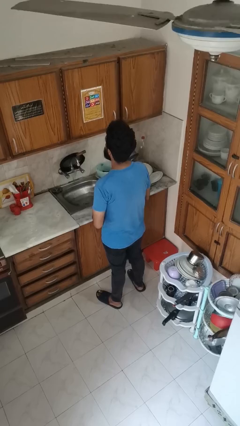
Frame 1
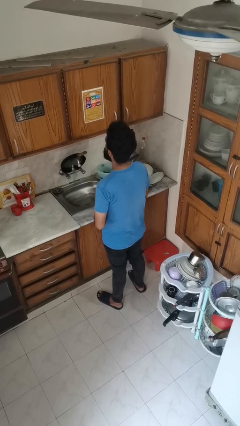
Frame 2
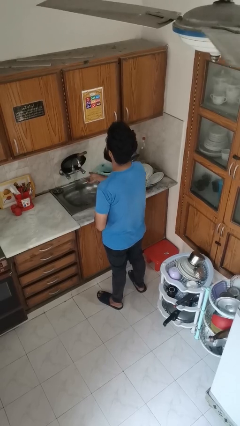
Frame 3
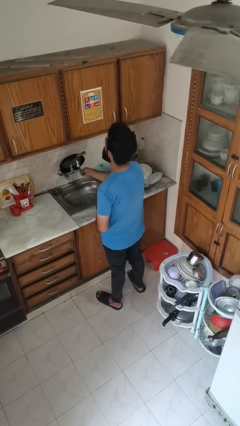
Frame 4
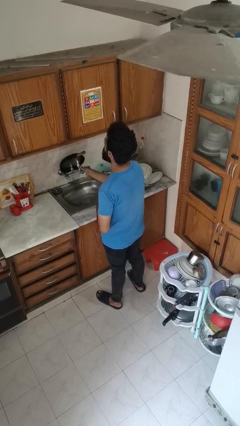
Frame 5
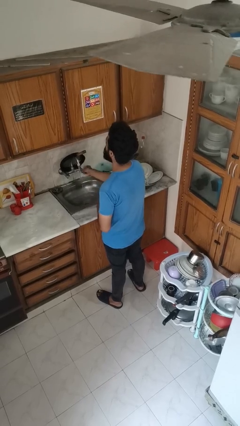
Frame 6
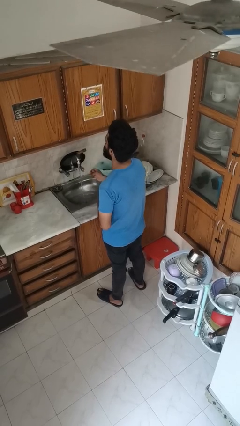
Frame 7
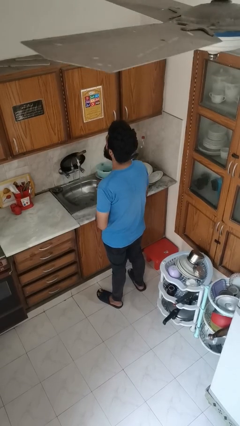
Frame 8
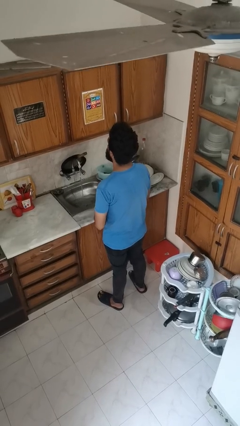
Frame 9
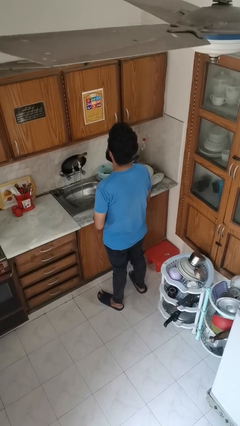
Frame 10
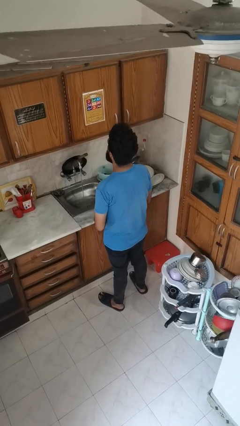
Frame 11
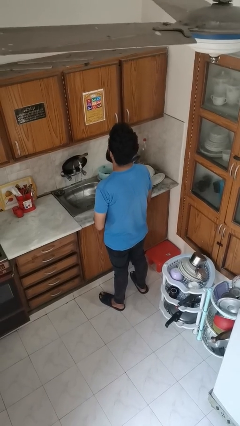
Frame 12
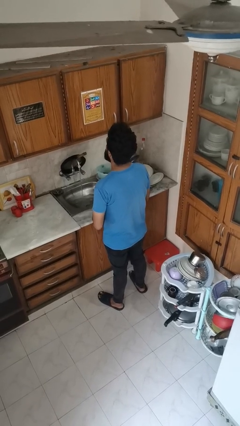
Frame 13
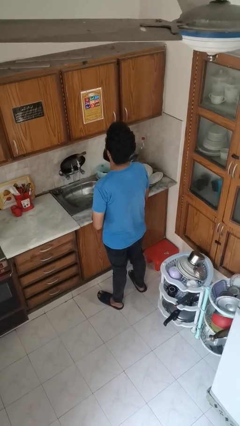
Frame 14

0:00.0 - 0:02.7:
person turns on faucet

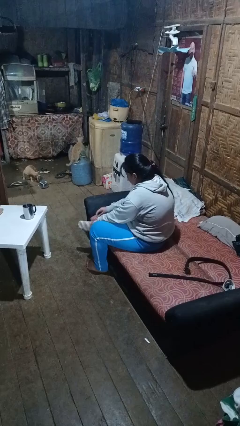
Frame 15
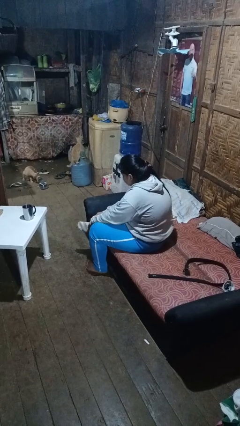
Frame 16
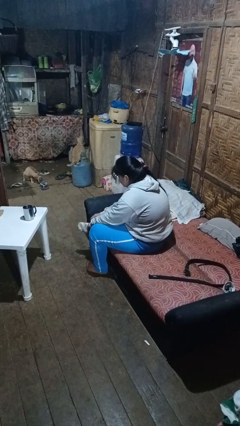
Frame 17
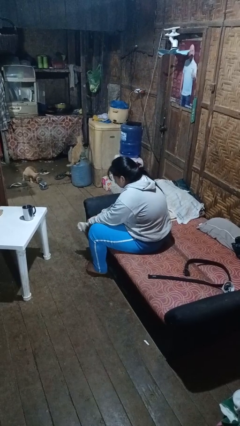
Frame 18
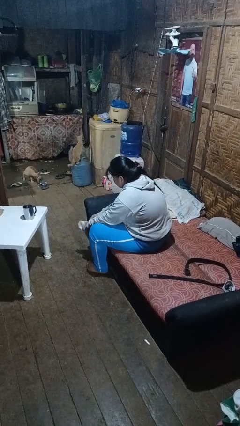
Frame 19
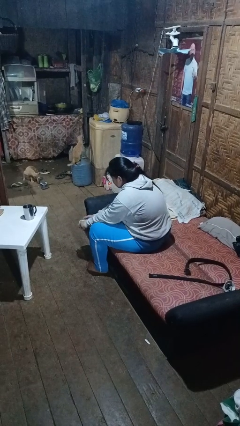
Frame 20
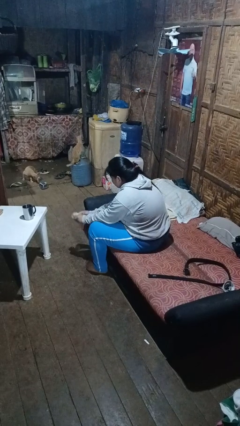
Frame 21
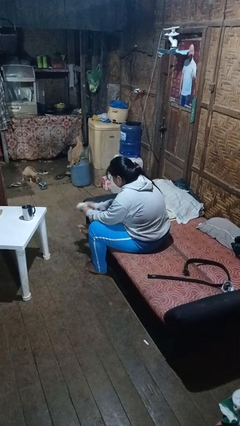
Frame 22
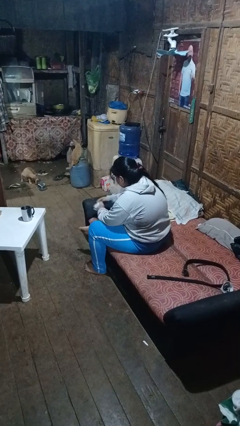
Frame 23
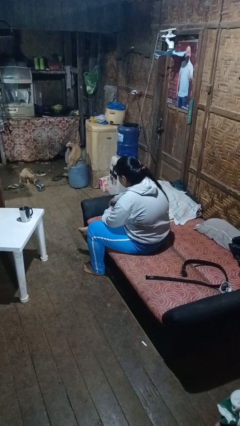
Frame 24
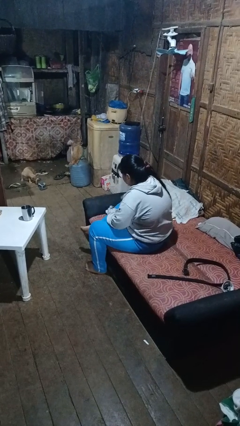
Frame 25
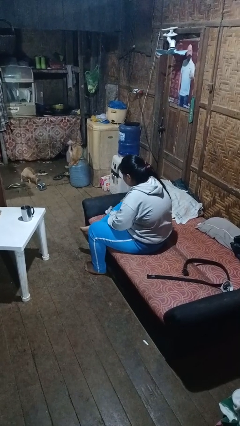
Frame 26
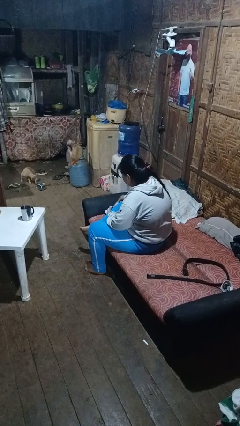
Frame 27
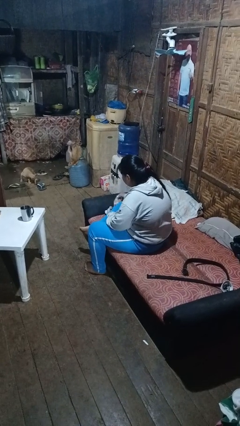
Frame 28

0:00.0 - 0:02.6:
person takes off socks

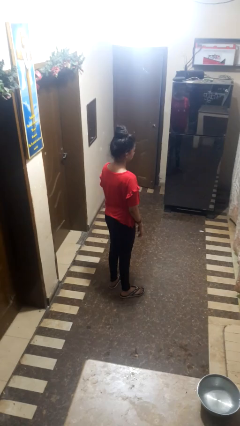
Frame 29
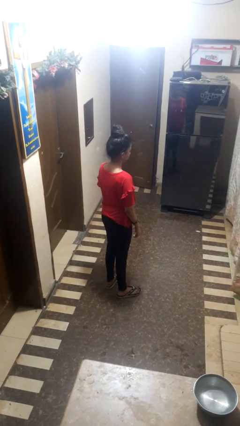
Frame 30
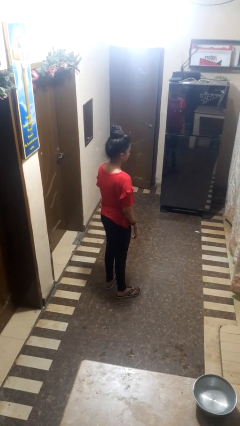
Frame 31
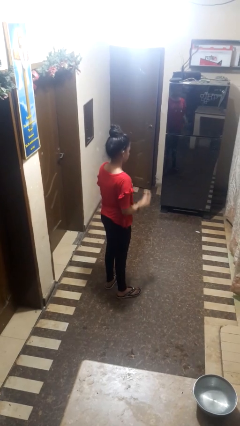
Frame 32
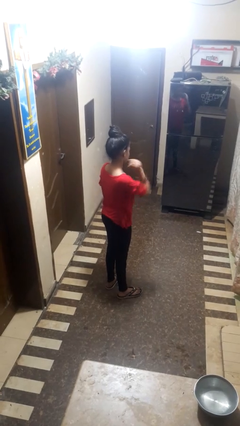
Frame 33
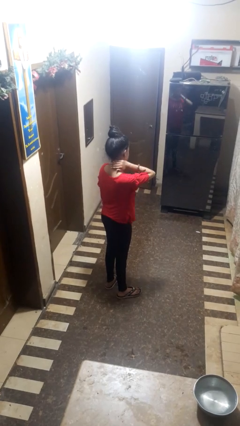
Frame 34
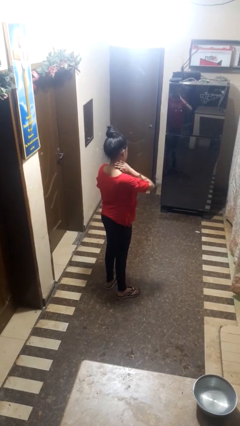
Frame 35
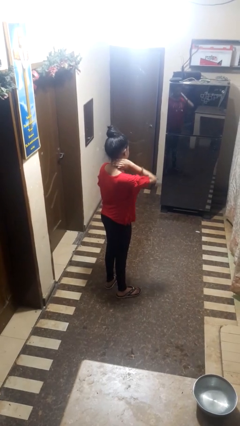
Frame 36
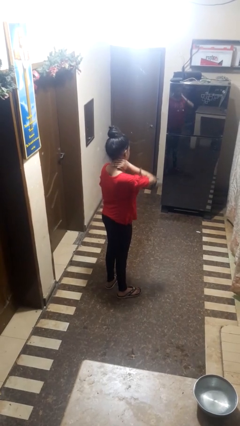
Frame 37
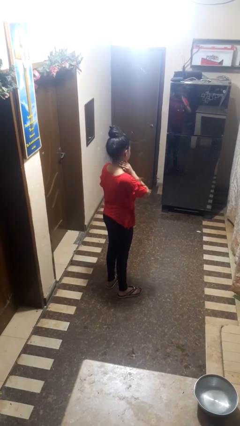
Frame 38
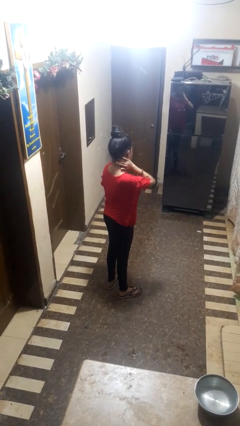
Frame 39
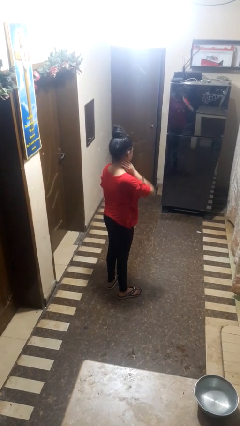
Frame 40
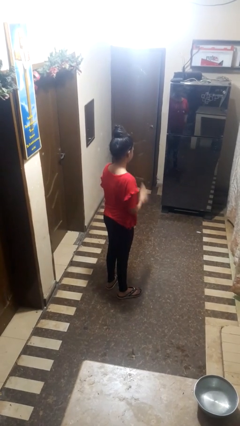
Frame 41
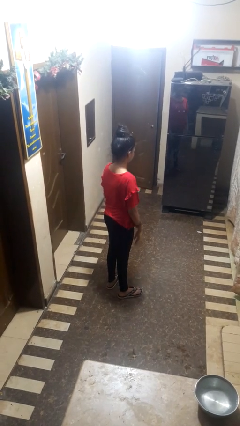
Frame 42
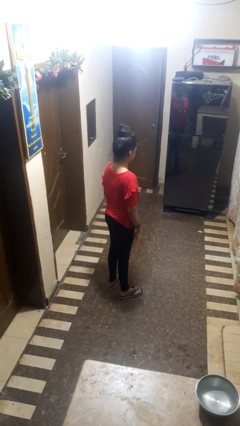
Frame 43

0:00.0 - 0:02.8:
person rubs neck

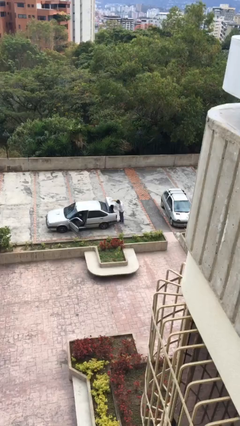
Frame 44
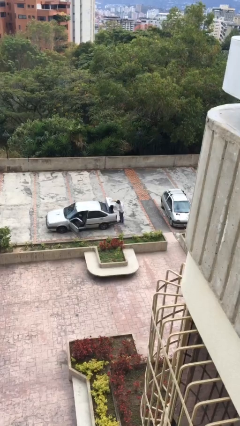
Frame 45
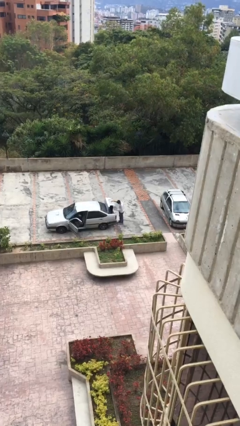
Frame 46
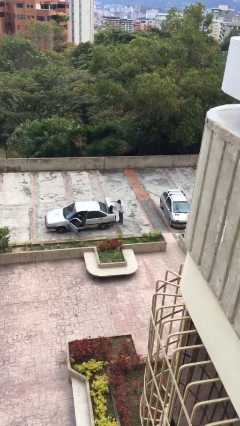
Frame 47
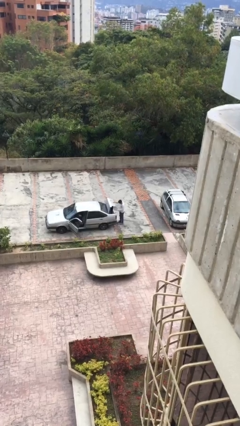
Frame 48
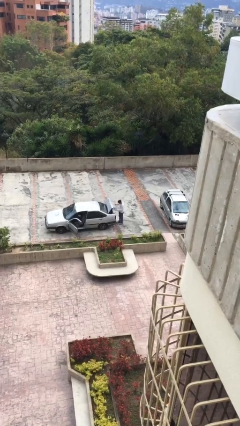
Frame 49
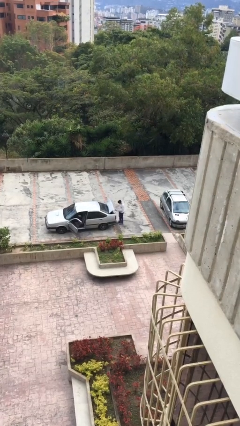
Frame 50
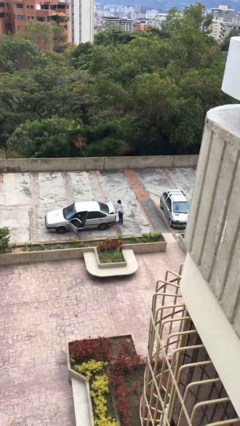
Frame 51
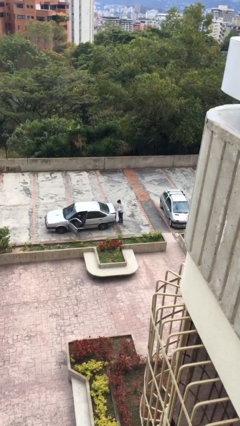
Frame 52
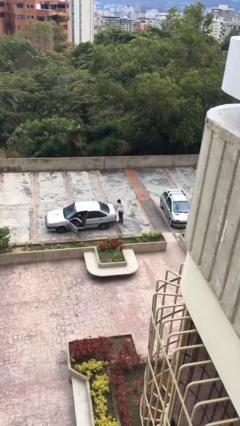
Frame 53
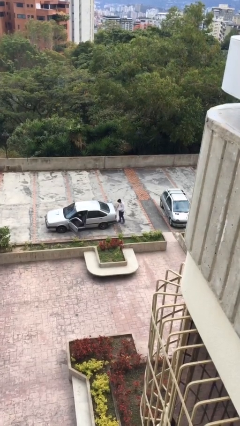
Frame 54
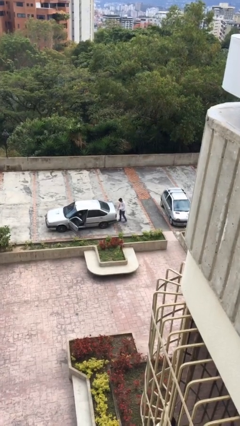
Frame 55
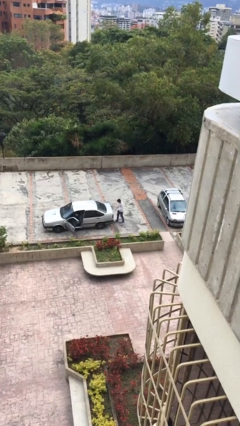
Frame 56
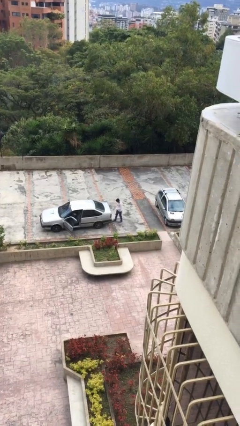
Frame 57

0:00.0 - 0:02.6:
person closes car trunk

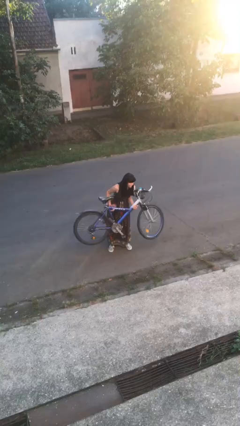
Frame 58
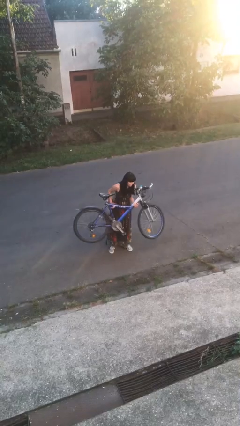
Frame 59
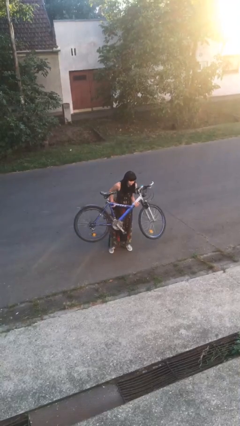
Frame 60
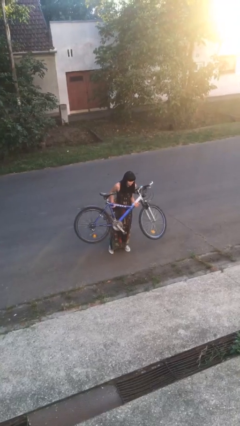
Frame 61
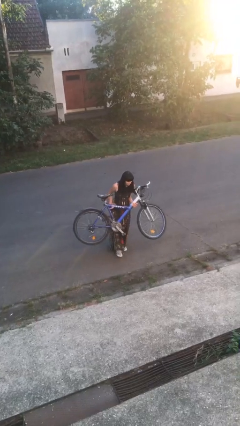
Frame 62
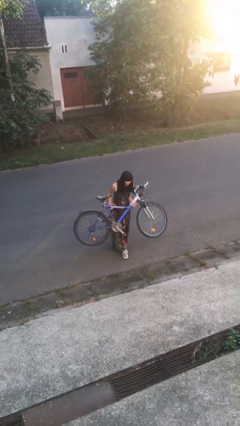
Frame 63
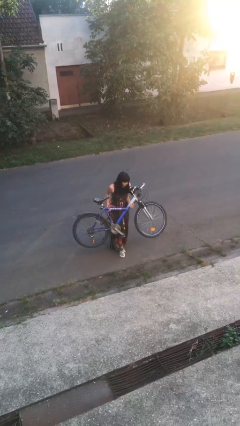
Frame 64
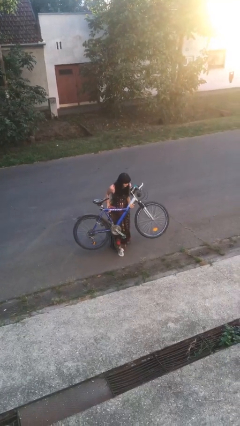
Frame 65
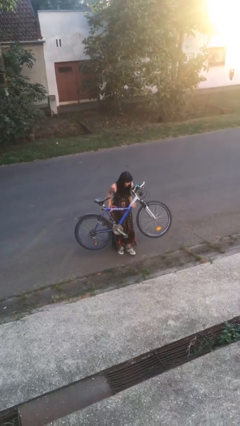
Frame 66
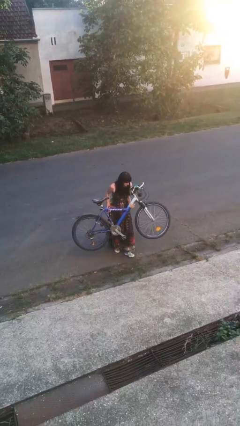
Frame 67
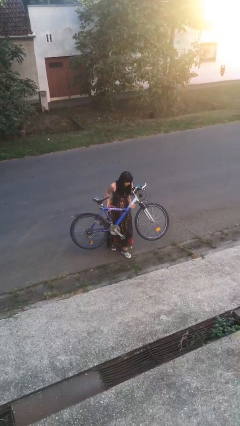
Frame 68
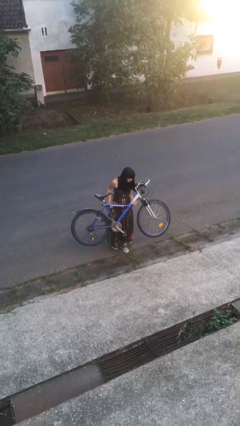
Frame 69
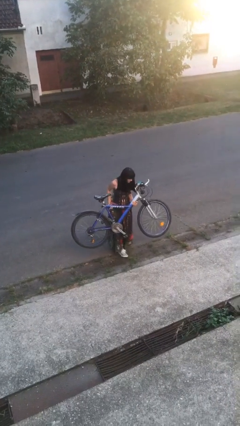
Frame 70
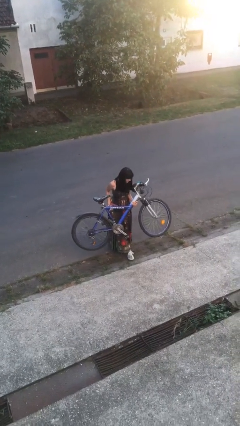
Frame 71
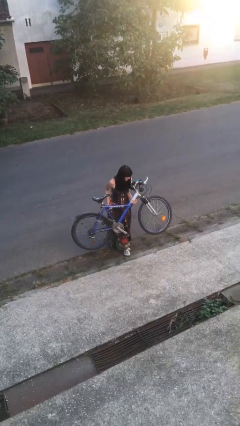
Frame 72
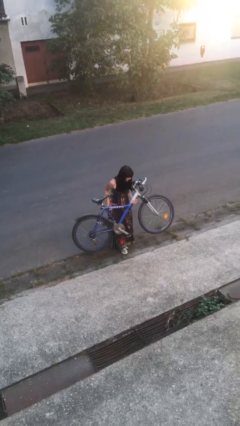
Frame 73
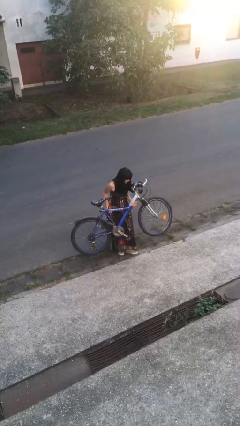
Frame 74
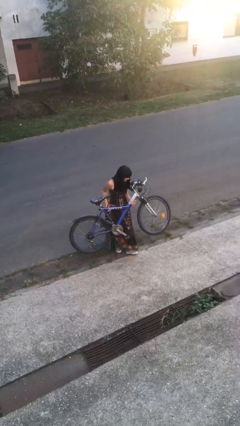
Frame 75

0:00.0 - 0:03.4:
person carries heavy object

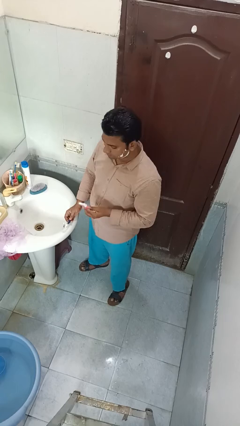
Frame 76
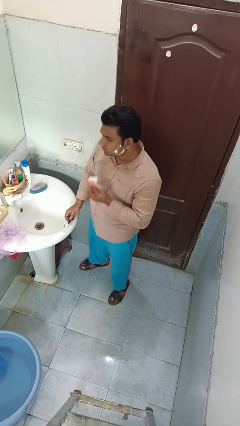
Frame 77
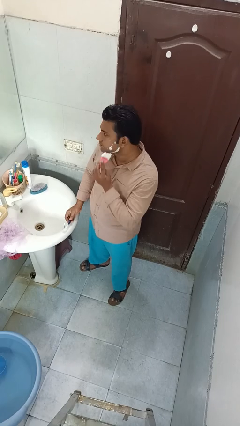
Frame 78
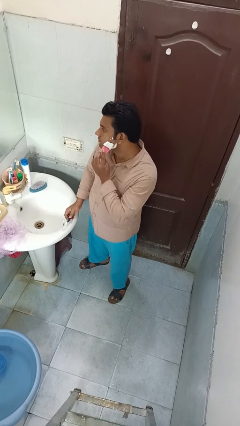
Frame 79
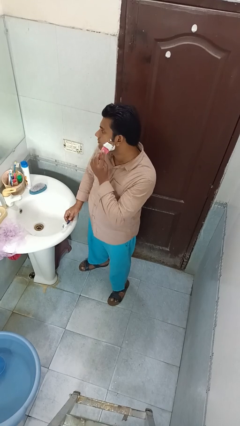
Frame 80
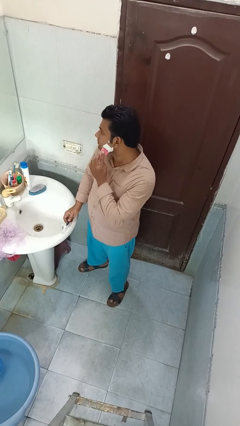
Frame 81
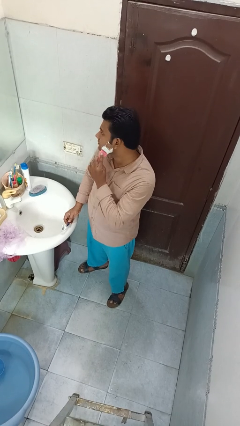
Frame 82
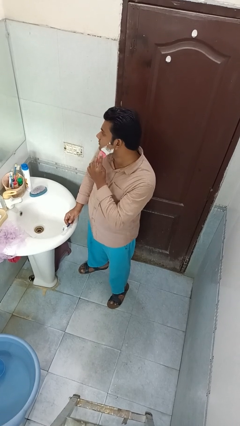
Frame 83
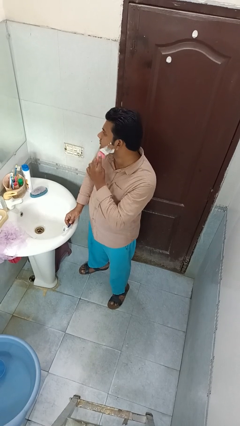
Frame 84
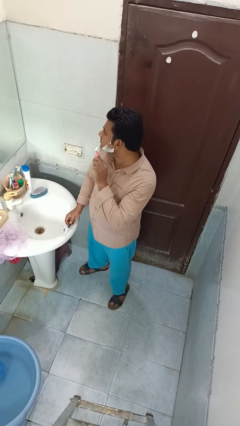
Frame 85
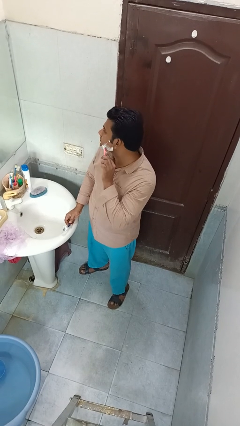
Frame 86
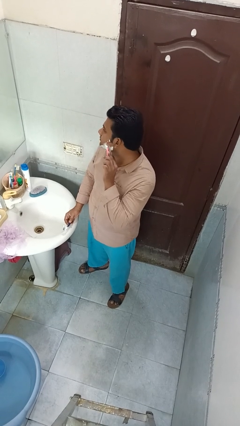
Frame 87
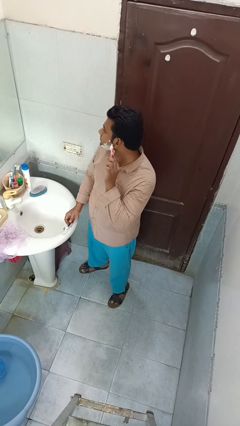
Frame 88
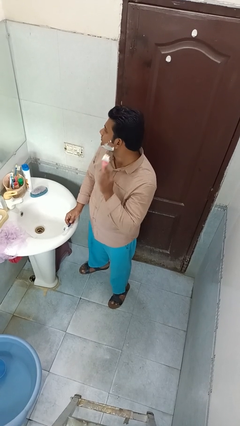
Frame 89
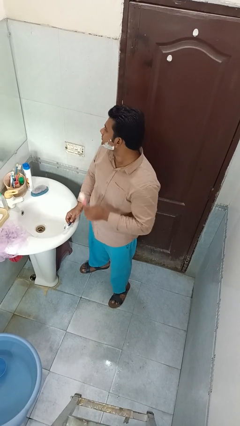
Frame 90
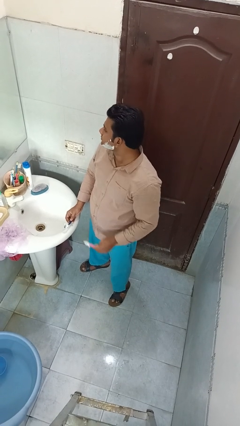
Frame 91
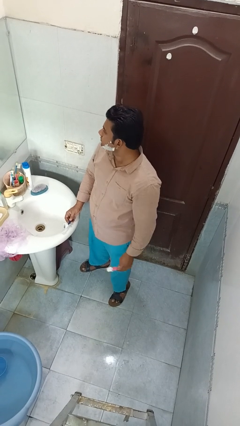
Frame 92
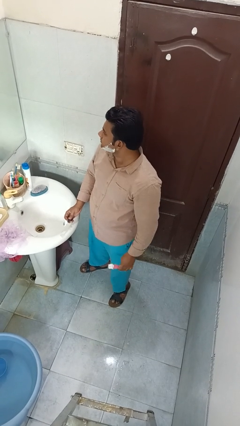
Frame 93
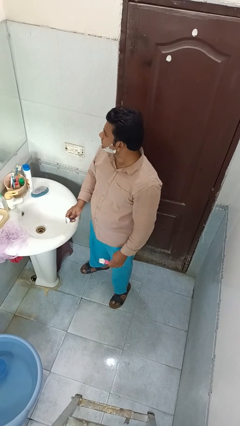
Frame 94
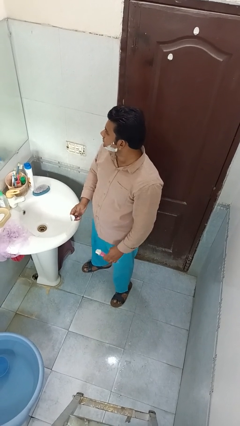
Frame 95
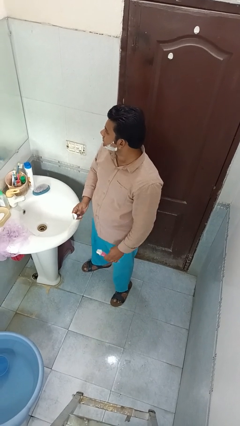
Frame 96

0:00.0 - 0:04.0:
person applies shaving cream
